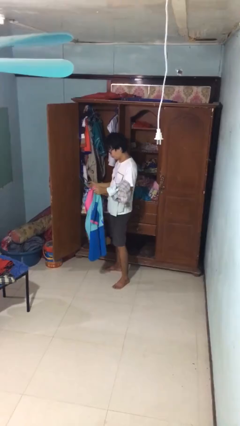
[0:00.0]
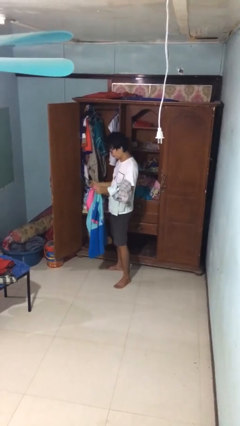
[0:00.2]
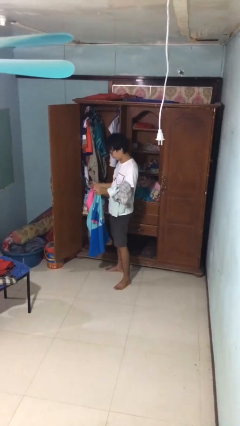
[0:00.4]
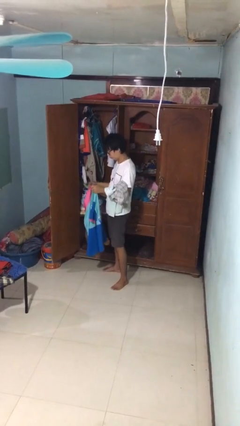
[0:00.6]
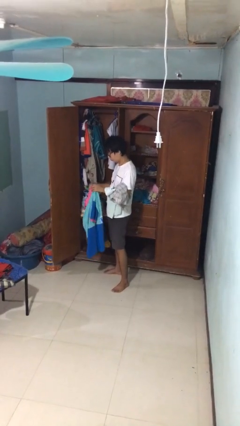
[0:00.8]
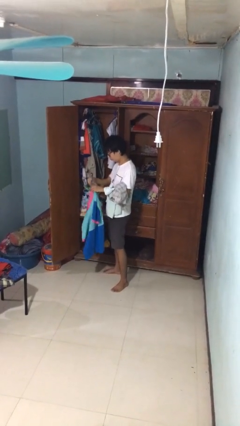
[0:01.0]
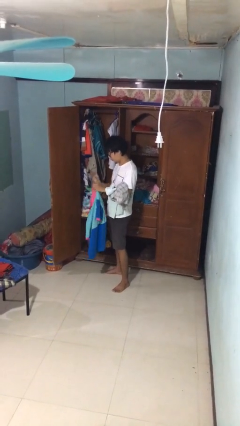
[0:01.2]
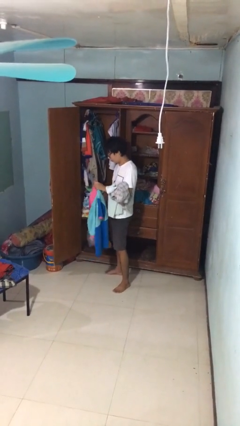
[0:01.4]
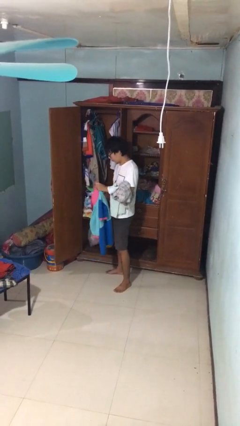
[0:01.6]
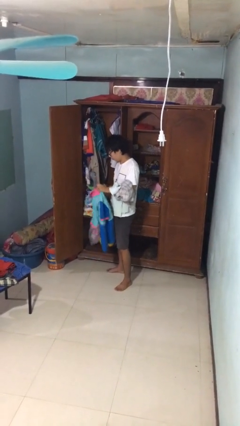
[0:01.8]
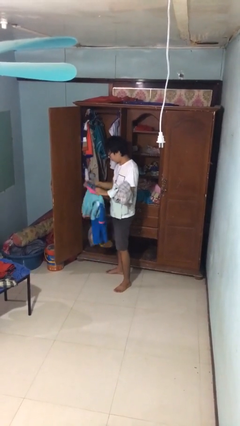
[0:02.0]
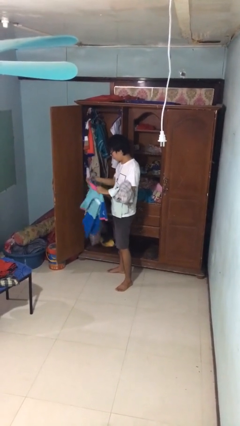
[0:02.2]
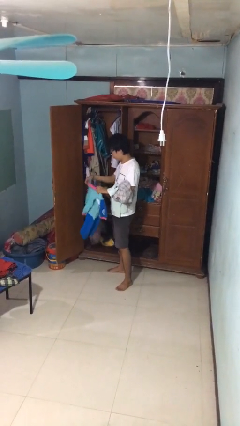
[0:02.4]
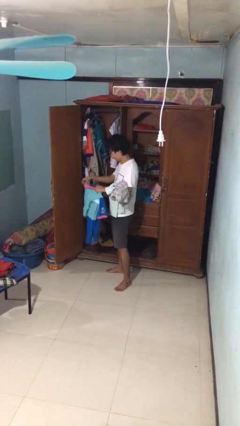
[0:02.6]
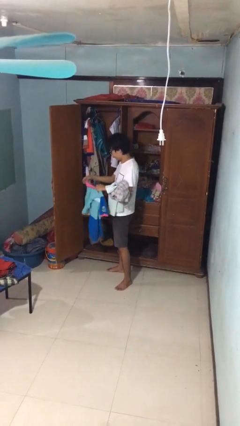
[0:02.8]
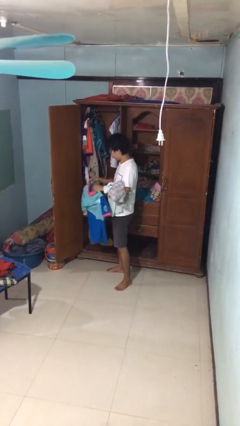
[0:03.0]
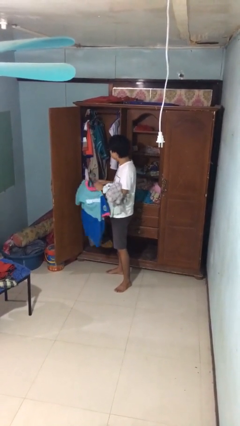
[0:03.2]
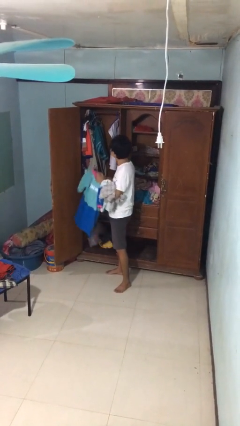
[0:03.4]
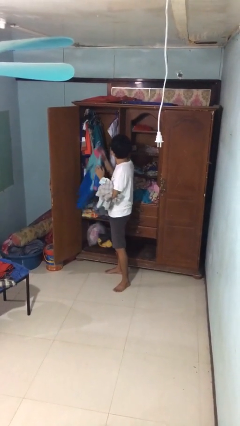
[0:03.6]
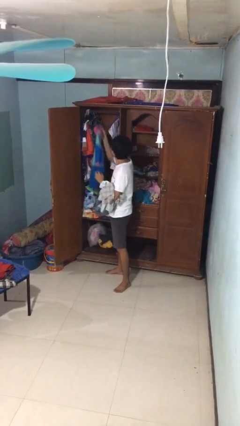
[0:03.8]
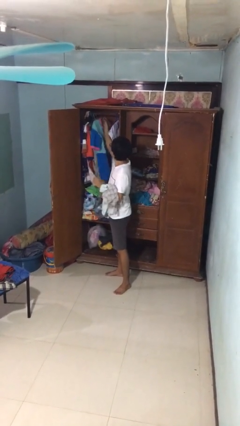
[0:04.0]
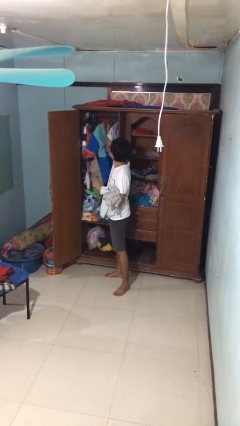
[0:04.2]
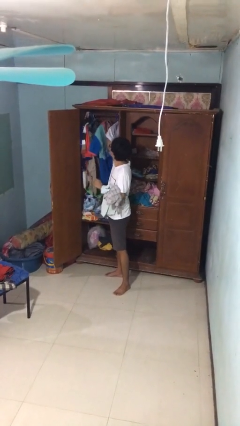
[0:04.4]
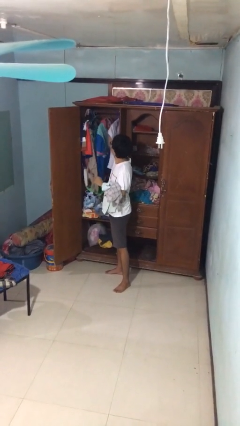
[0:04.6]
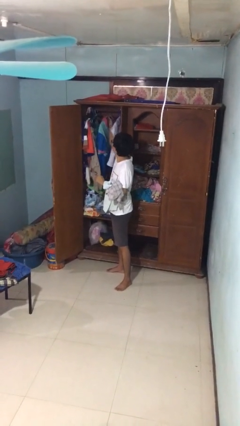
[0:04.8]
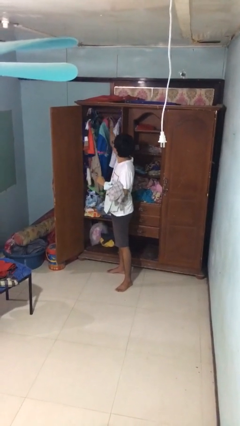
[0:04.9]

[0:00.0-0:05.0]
person puts clothes into closet

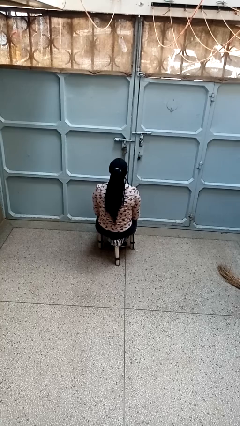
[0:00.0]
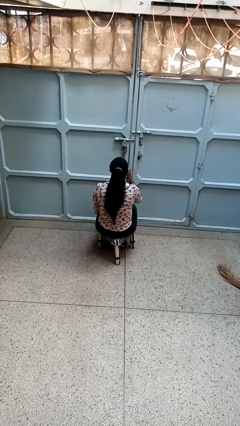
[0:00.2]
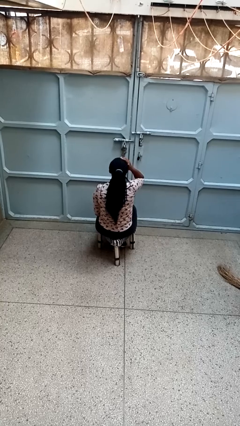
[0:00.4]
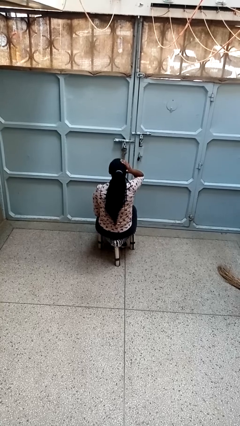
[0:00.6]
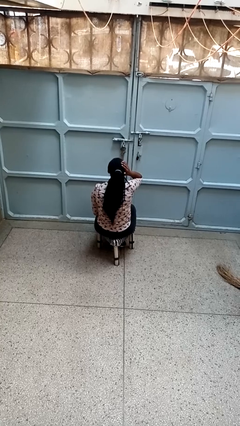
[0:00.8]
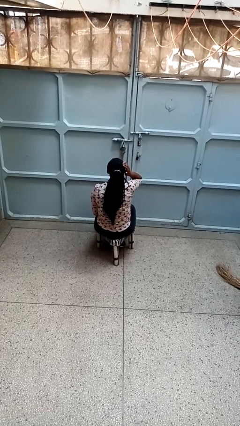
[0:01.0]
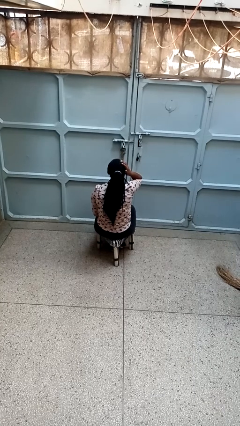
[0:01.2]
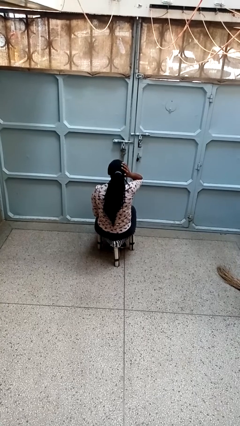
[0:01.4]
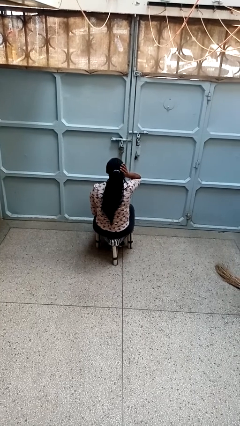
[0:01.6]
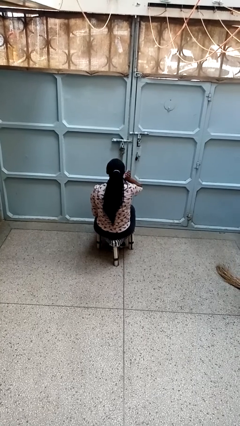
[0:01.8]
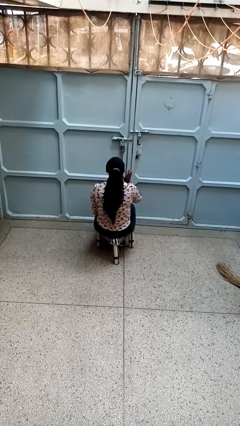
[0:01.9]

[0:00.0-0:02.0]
person strokes hair

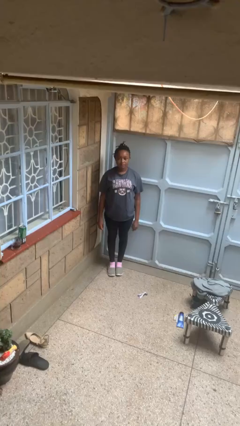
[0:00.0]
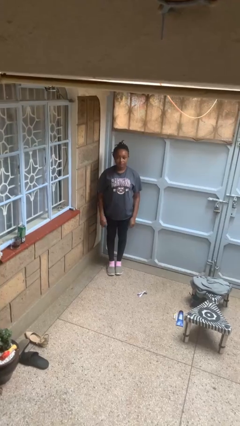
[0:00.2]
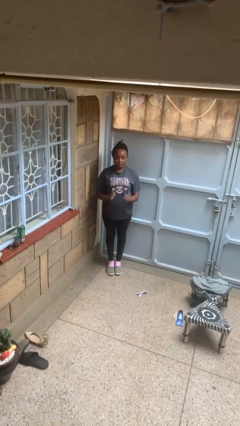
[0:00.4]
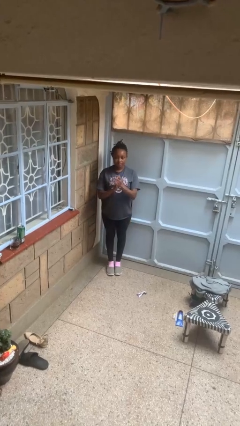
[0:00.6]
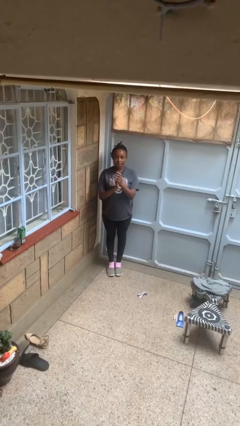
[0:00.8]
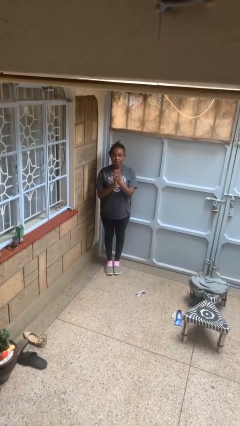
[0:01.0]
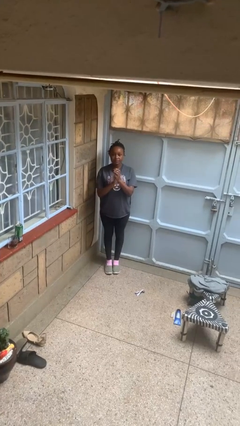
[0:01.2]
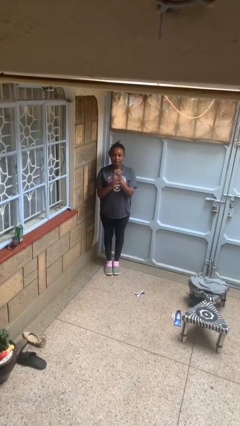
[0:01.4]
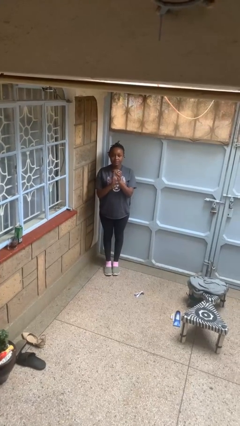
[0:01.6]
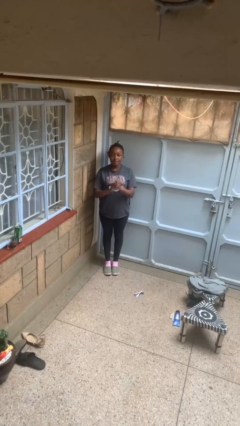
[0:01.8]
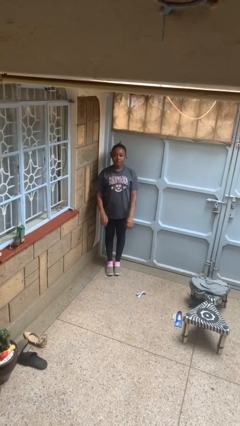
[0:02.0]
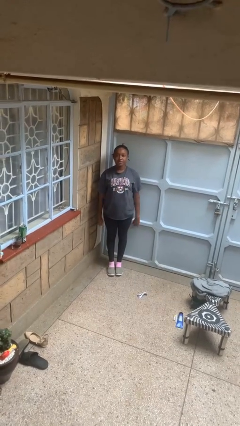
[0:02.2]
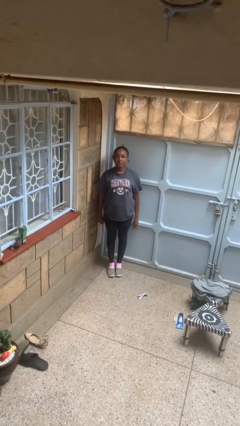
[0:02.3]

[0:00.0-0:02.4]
person claps hands

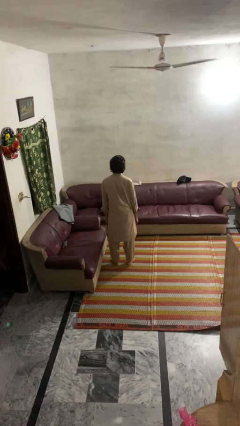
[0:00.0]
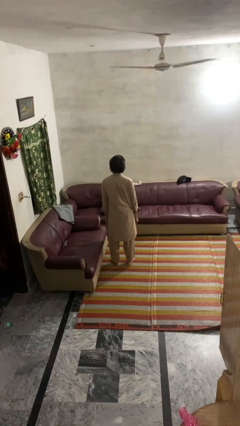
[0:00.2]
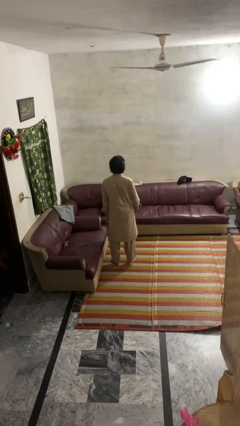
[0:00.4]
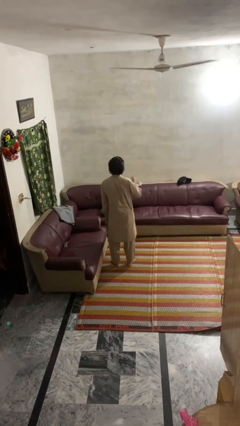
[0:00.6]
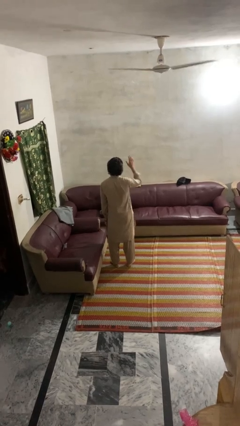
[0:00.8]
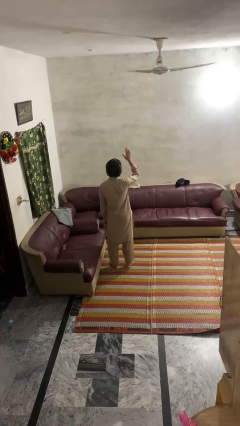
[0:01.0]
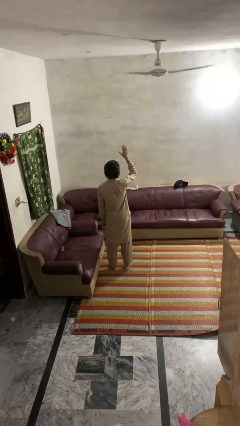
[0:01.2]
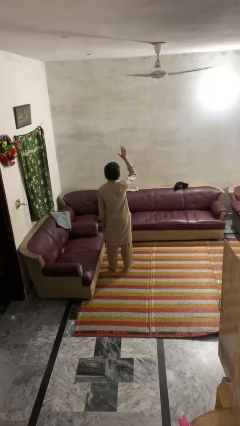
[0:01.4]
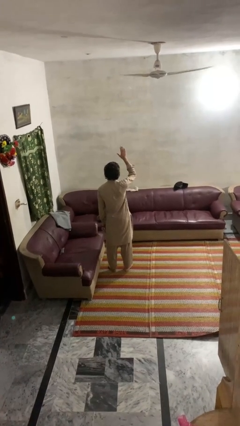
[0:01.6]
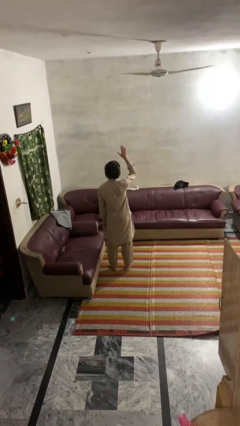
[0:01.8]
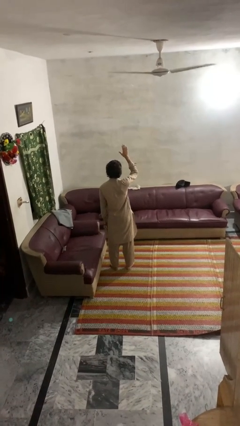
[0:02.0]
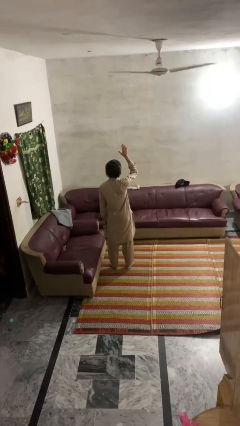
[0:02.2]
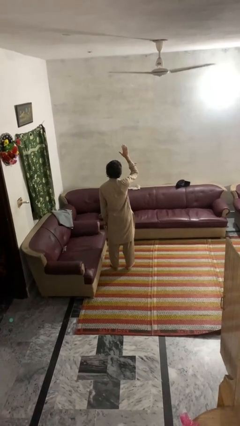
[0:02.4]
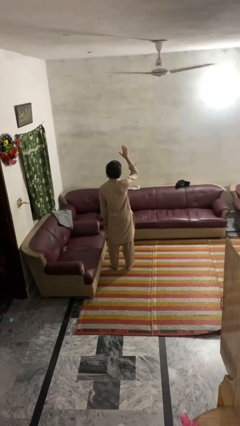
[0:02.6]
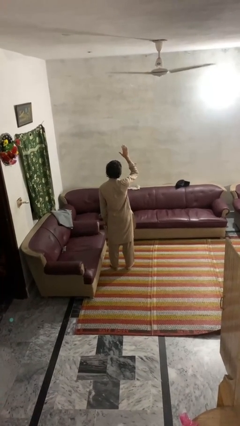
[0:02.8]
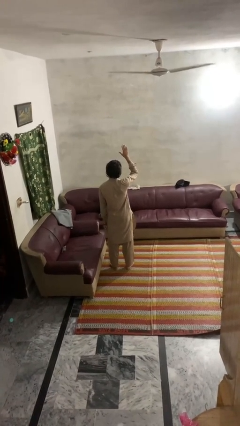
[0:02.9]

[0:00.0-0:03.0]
person gestures raise hand

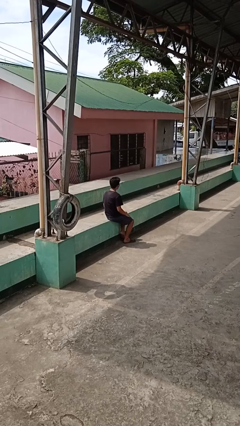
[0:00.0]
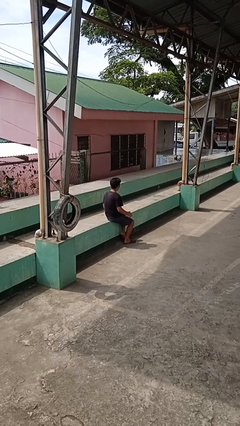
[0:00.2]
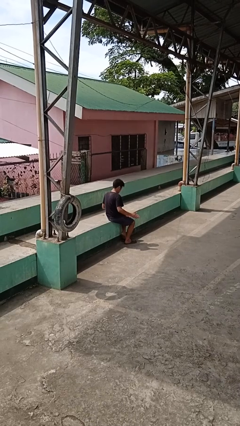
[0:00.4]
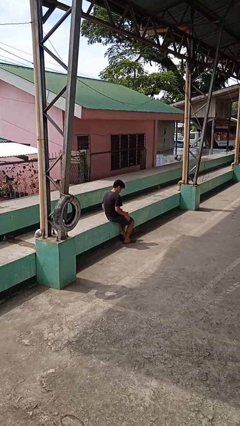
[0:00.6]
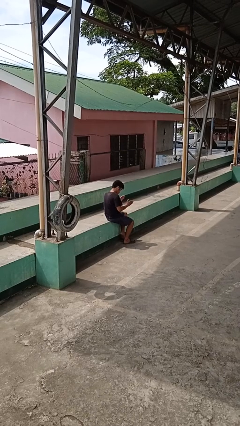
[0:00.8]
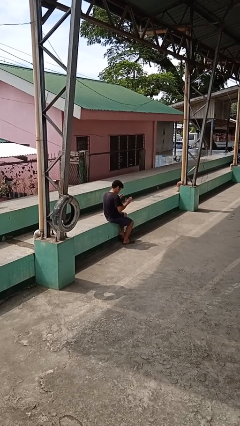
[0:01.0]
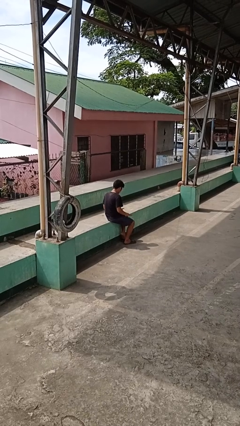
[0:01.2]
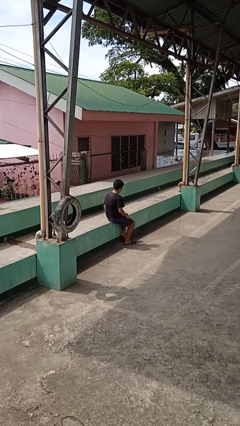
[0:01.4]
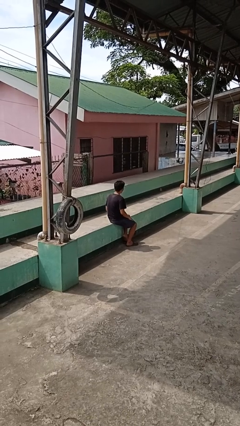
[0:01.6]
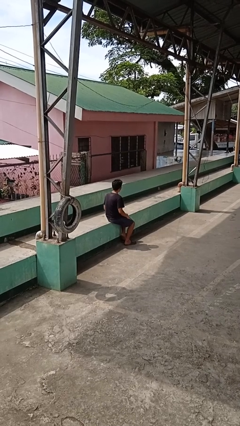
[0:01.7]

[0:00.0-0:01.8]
person slaps hands on thighs

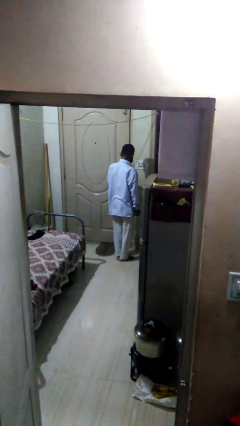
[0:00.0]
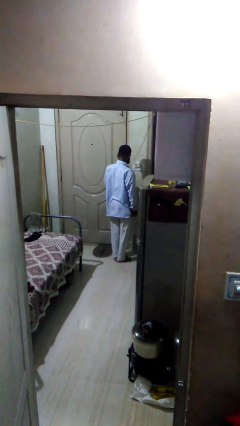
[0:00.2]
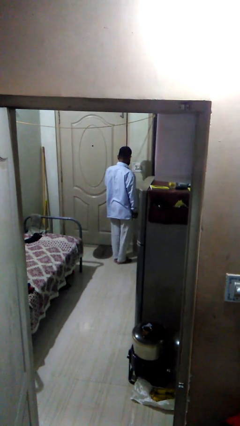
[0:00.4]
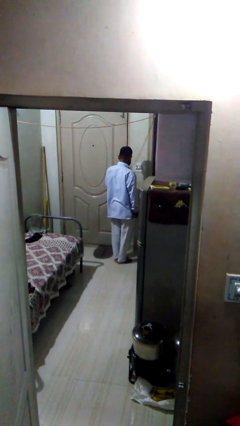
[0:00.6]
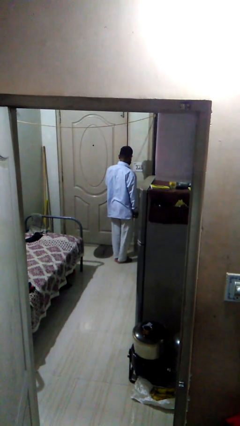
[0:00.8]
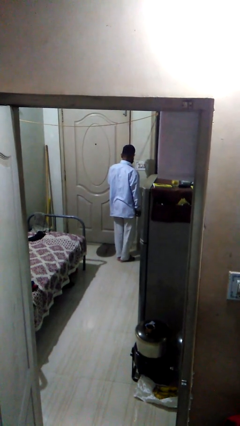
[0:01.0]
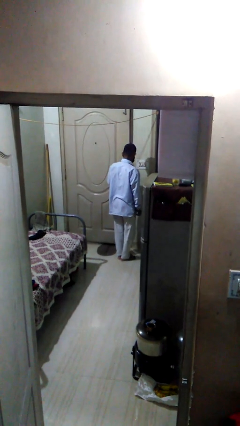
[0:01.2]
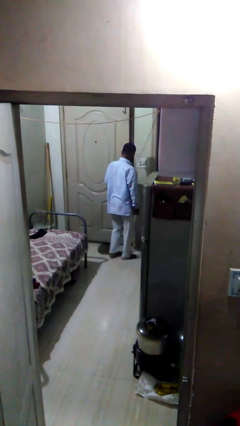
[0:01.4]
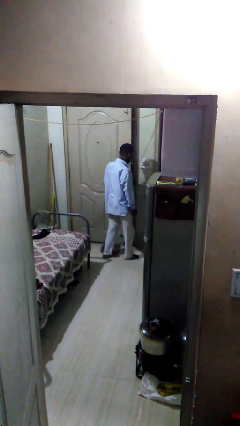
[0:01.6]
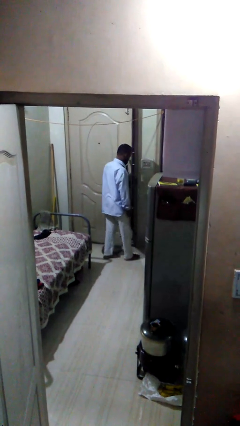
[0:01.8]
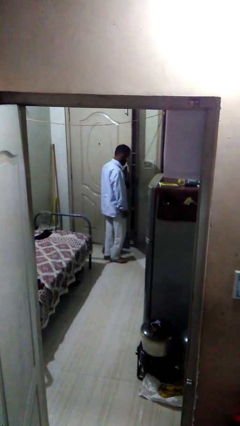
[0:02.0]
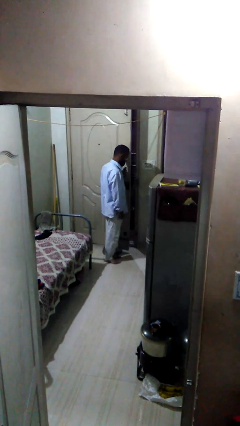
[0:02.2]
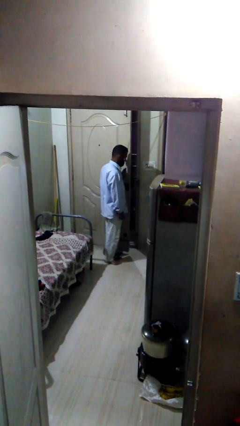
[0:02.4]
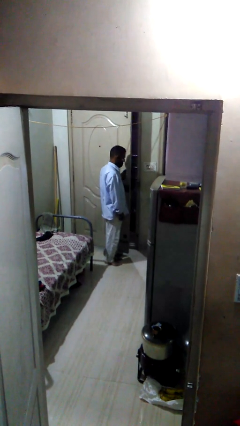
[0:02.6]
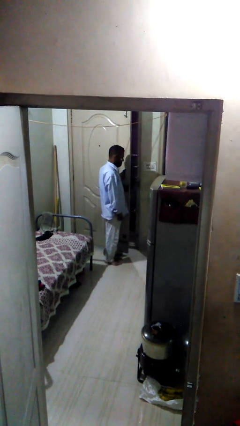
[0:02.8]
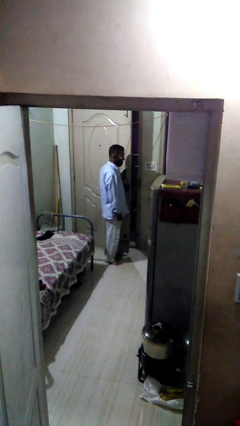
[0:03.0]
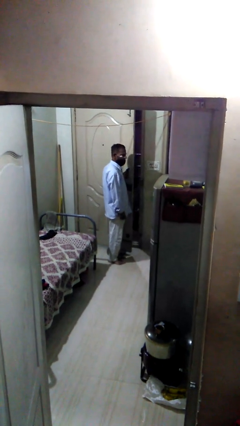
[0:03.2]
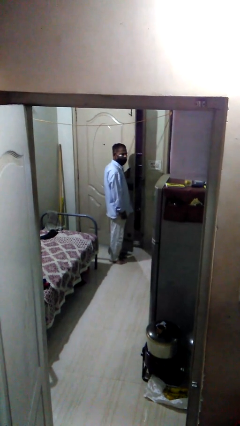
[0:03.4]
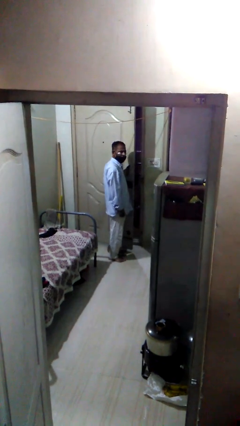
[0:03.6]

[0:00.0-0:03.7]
person opens facility door
